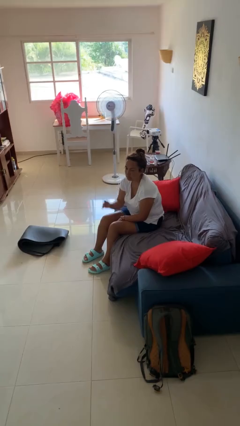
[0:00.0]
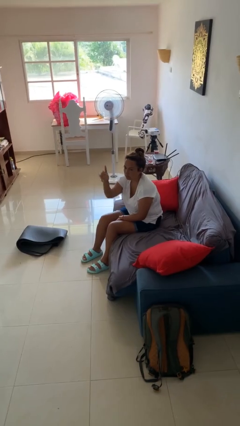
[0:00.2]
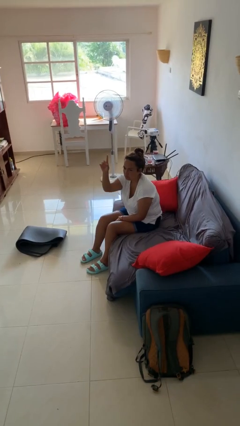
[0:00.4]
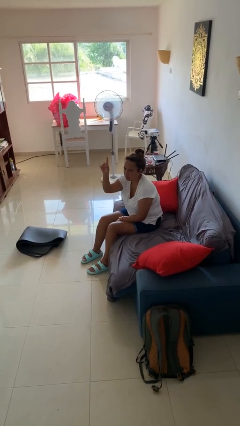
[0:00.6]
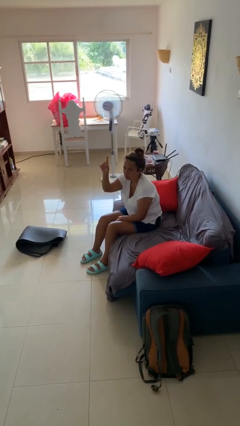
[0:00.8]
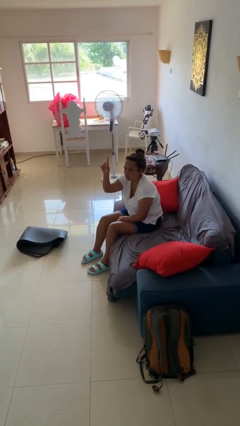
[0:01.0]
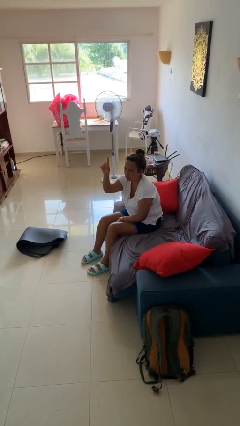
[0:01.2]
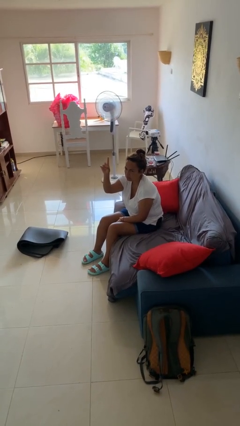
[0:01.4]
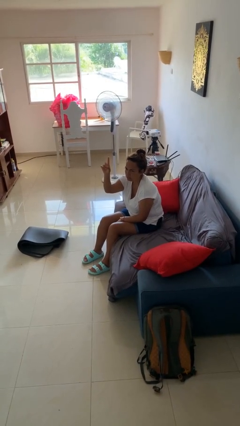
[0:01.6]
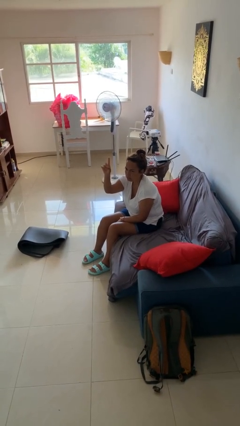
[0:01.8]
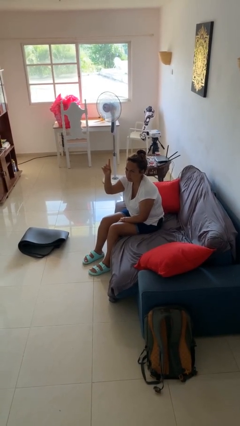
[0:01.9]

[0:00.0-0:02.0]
person gestures raise hand

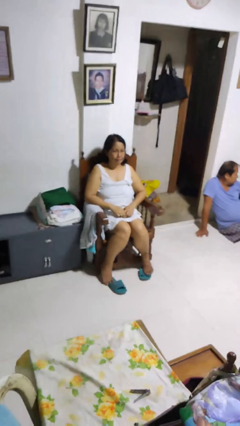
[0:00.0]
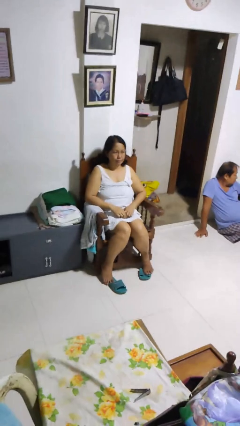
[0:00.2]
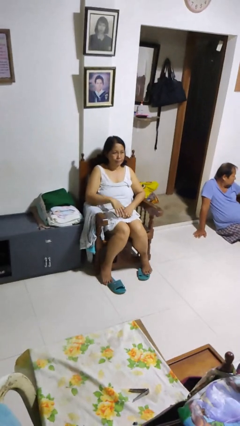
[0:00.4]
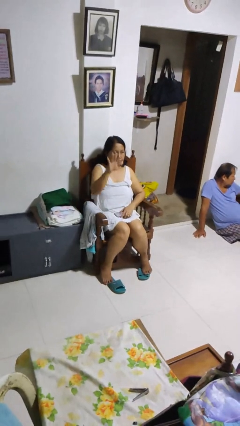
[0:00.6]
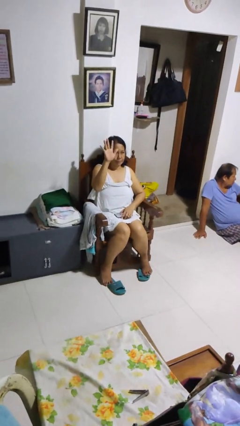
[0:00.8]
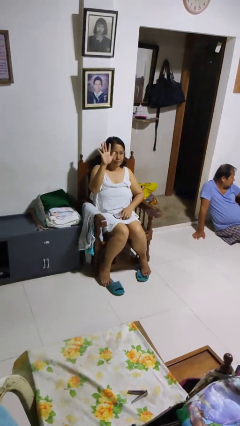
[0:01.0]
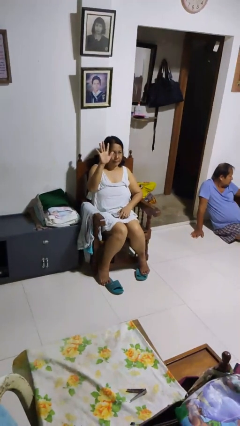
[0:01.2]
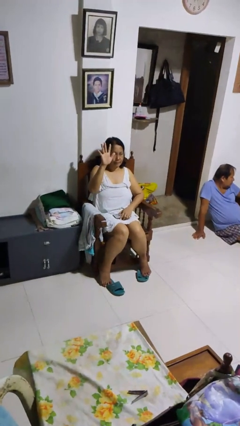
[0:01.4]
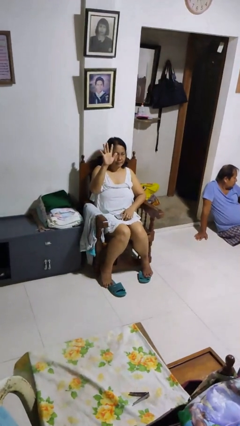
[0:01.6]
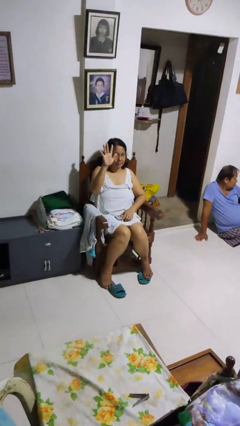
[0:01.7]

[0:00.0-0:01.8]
person gestures number five

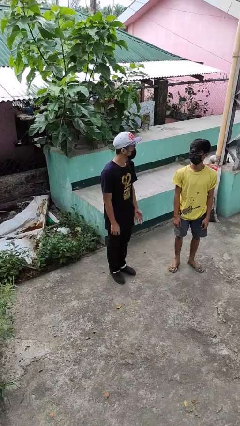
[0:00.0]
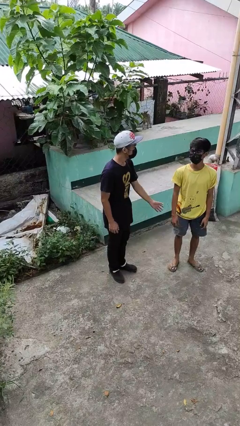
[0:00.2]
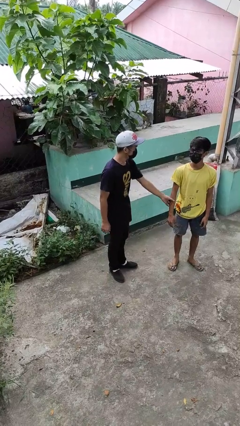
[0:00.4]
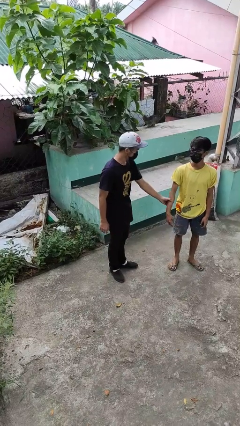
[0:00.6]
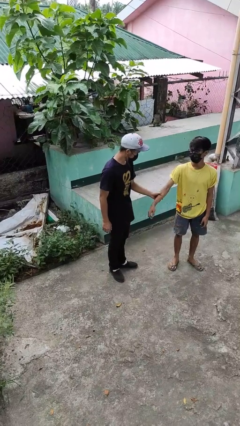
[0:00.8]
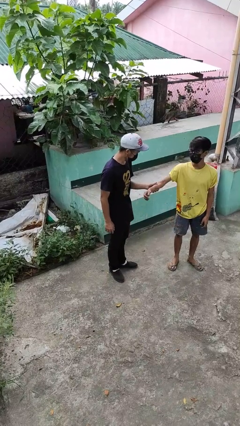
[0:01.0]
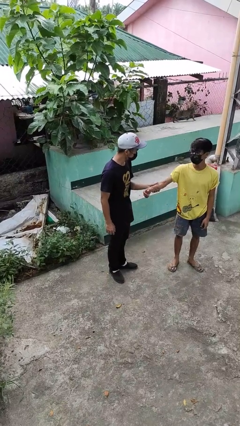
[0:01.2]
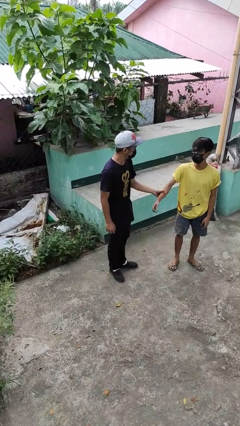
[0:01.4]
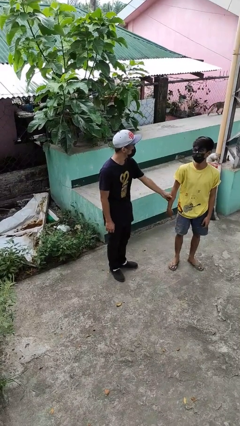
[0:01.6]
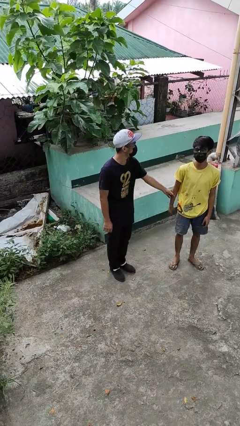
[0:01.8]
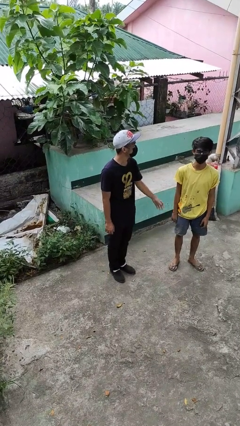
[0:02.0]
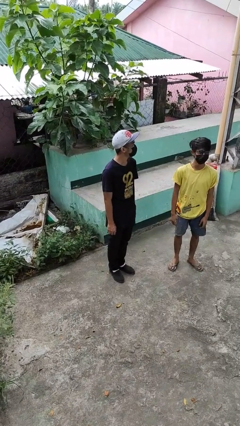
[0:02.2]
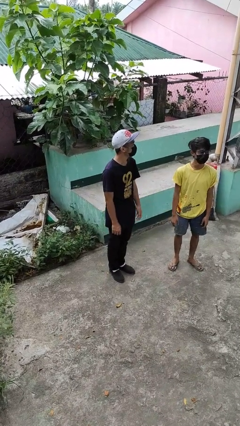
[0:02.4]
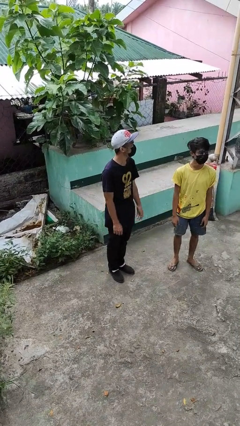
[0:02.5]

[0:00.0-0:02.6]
person grabs person by forearm

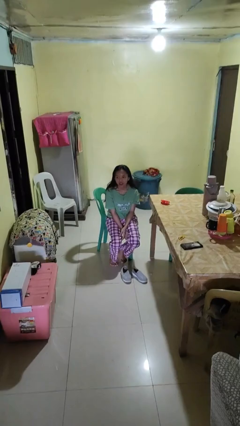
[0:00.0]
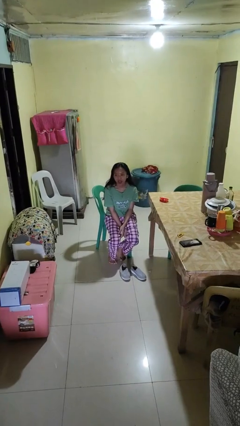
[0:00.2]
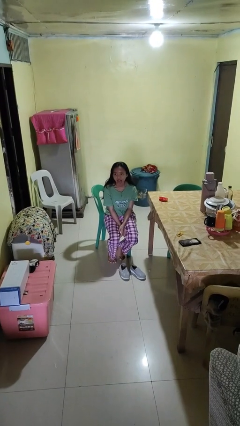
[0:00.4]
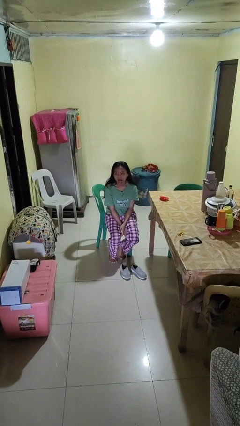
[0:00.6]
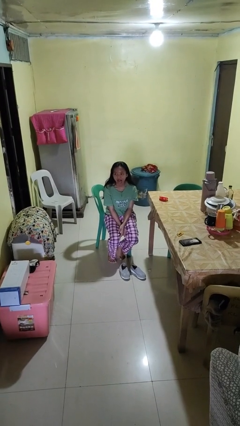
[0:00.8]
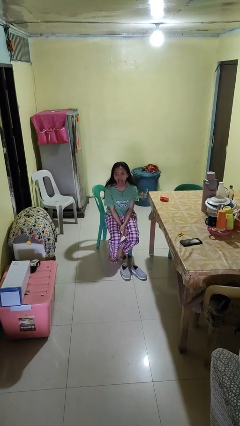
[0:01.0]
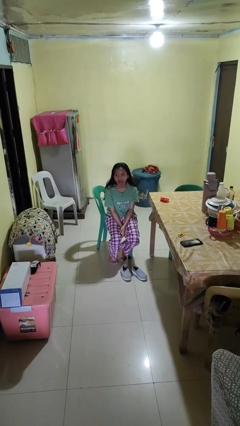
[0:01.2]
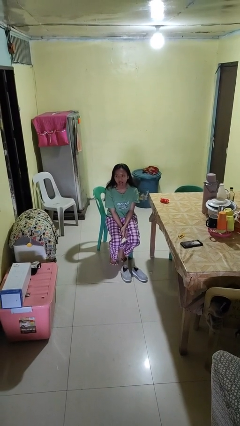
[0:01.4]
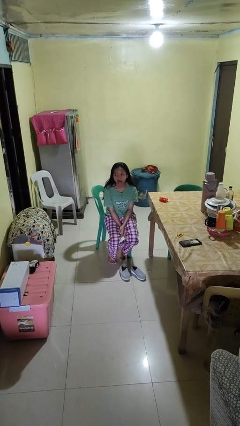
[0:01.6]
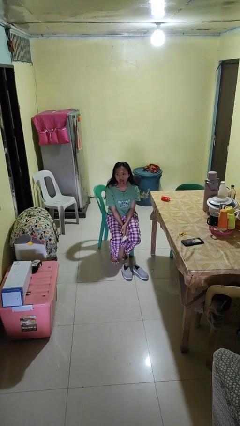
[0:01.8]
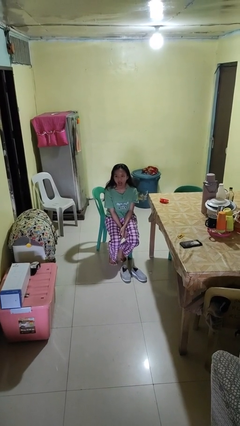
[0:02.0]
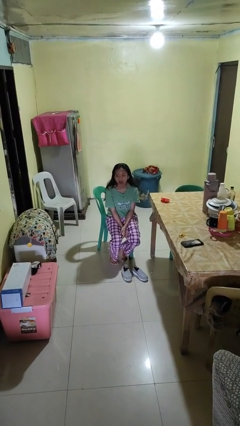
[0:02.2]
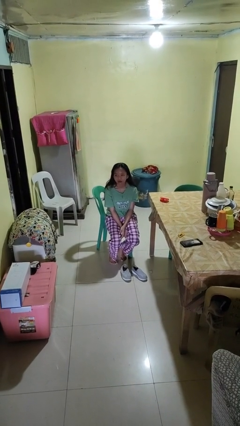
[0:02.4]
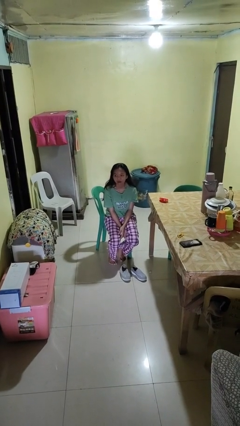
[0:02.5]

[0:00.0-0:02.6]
person sticks out tongue

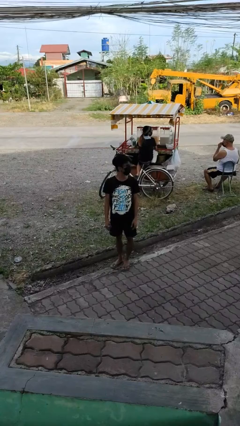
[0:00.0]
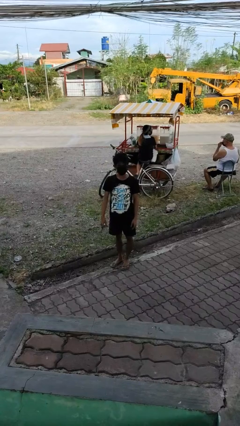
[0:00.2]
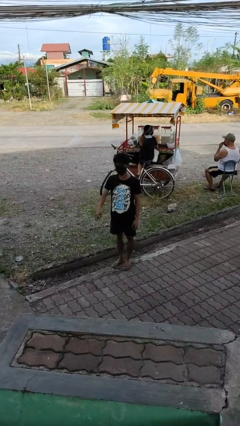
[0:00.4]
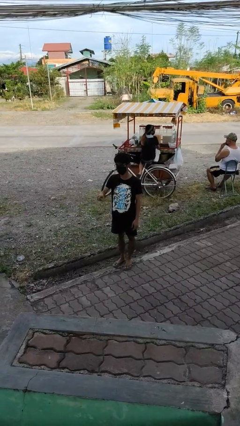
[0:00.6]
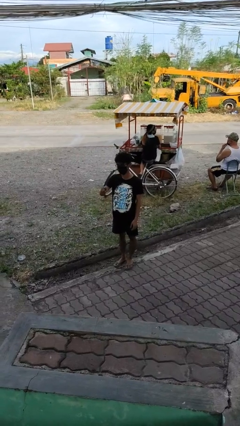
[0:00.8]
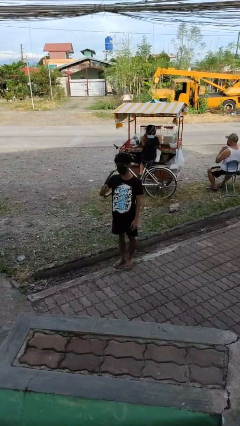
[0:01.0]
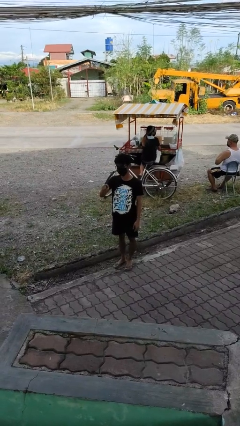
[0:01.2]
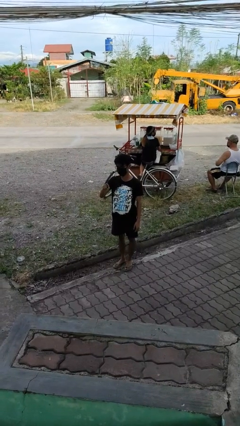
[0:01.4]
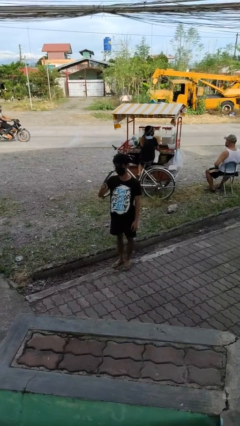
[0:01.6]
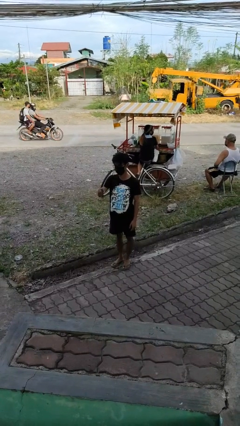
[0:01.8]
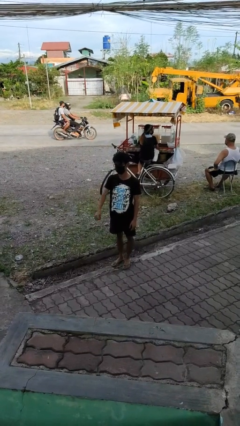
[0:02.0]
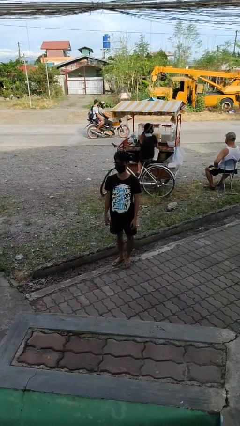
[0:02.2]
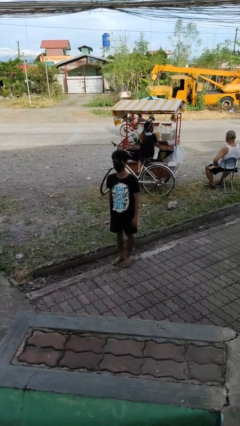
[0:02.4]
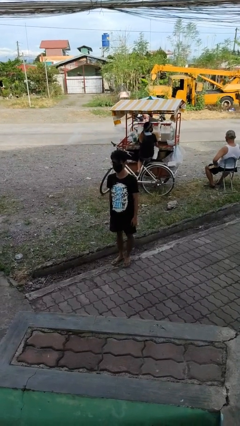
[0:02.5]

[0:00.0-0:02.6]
person points at person

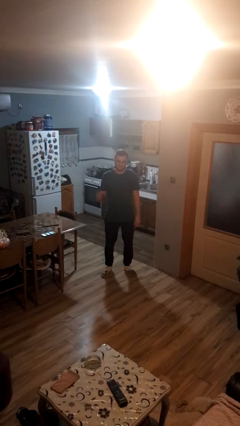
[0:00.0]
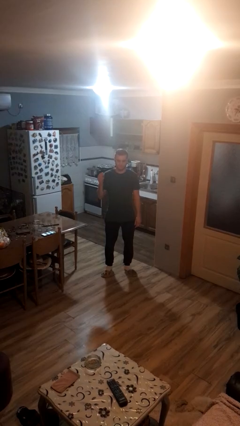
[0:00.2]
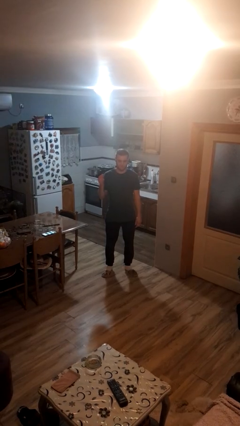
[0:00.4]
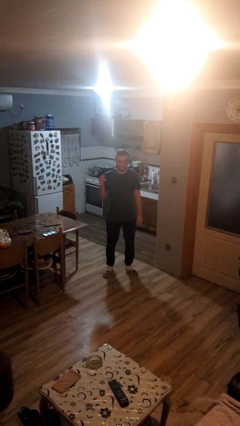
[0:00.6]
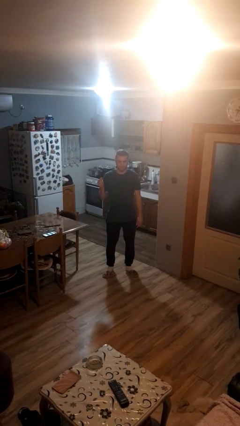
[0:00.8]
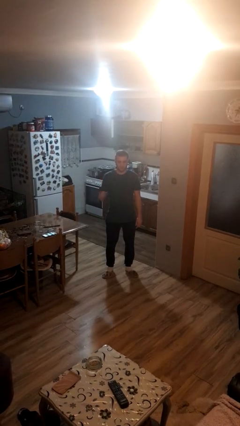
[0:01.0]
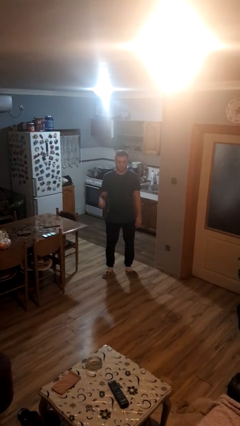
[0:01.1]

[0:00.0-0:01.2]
person snaps fingers

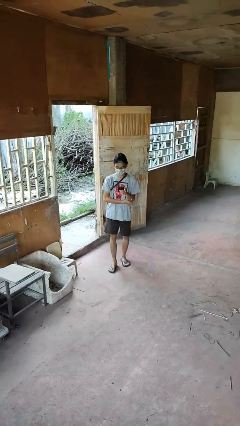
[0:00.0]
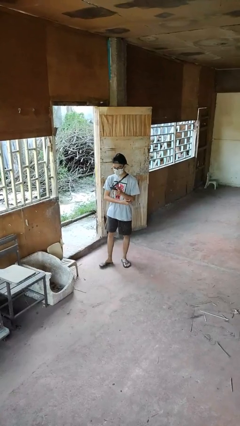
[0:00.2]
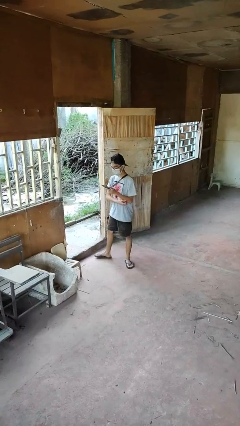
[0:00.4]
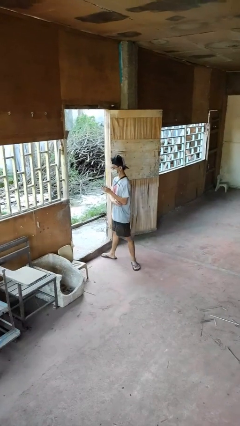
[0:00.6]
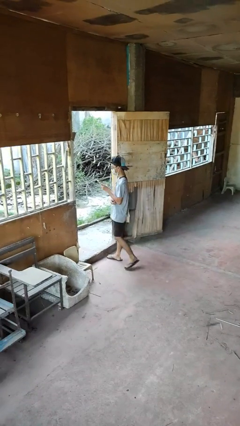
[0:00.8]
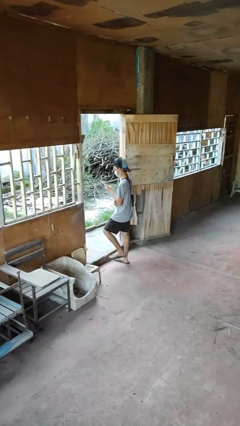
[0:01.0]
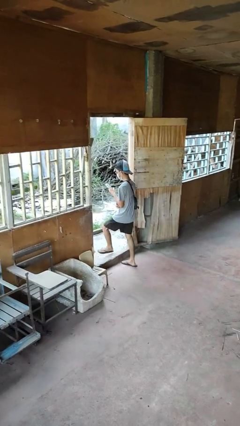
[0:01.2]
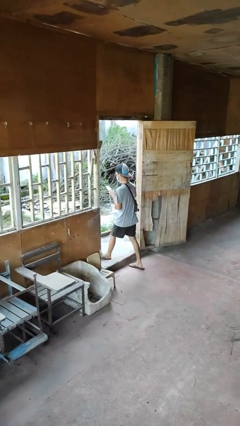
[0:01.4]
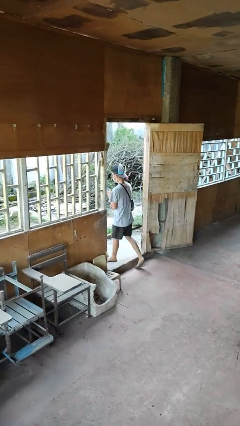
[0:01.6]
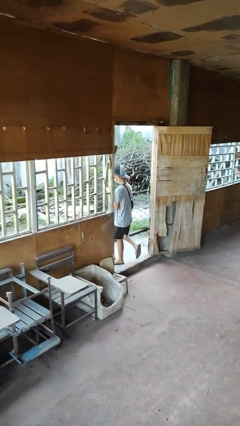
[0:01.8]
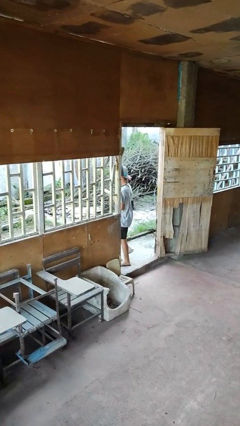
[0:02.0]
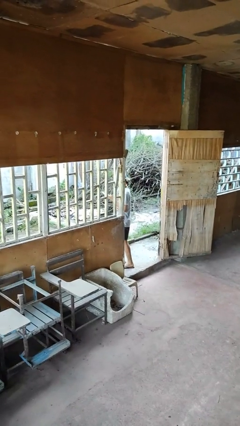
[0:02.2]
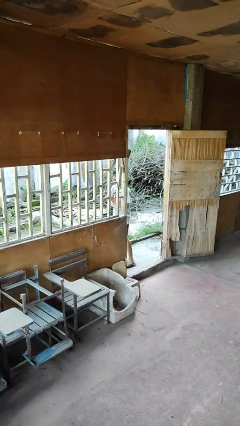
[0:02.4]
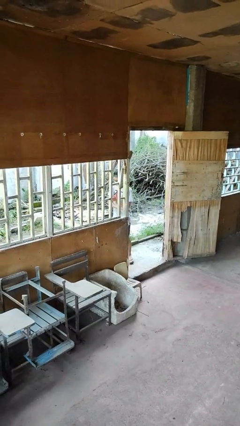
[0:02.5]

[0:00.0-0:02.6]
person exits scene through structure

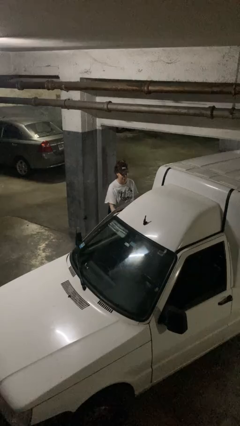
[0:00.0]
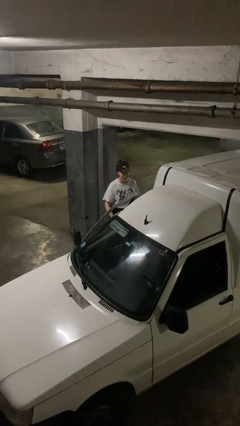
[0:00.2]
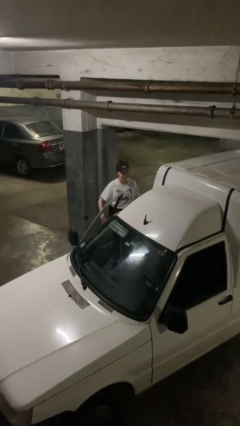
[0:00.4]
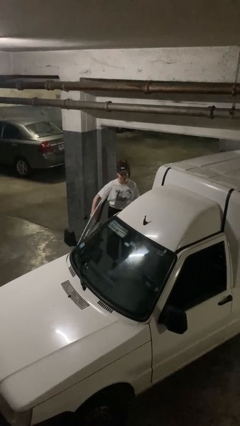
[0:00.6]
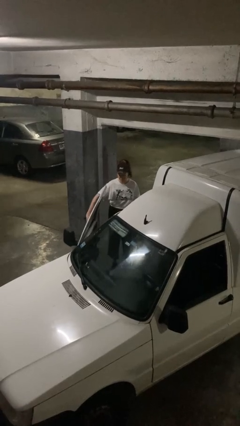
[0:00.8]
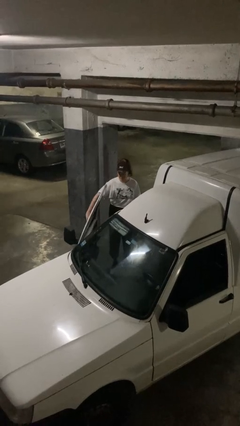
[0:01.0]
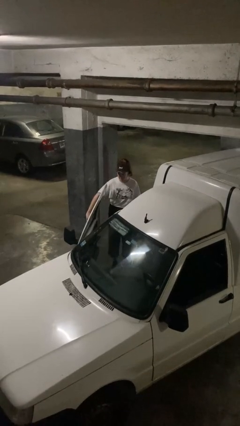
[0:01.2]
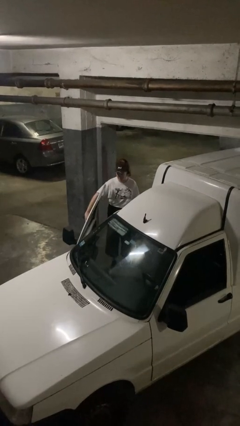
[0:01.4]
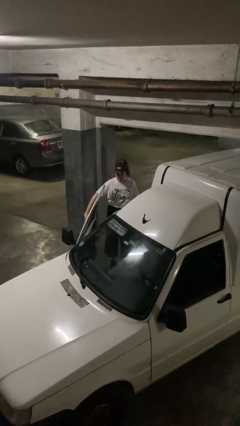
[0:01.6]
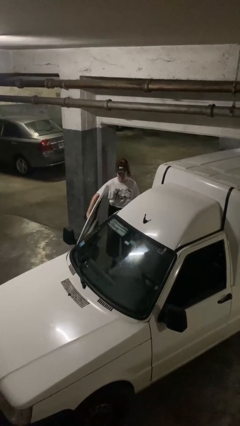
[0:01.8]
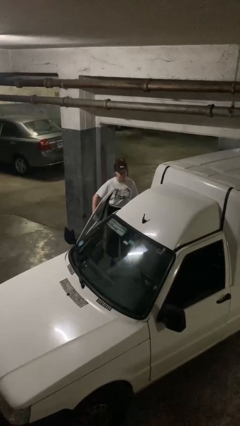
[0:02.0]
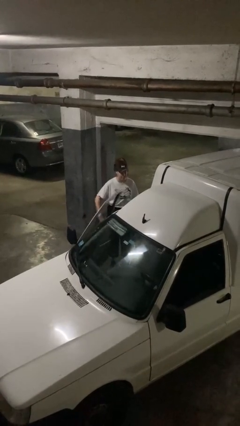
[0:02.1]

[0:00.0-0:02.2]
person opens car door
